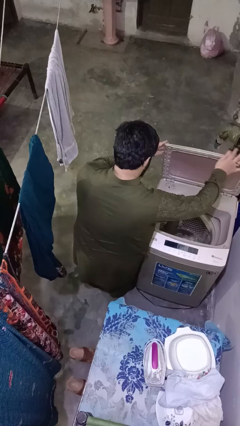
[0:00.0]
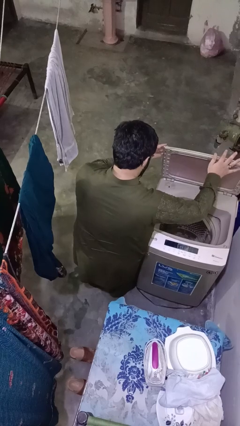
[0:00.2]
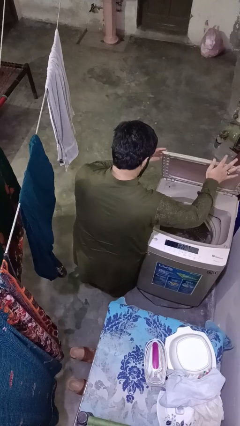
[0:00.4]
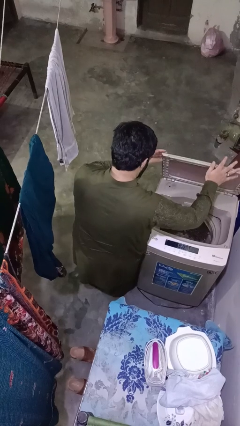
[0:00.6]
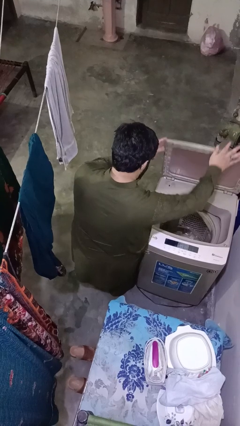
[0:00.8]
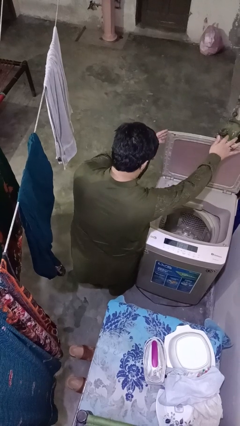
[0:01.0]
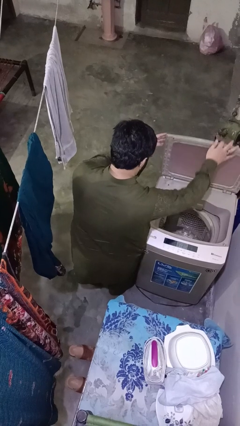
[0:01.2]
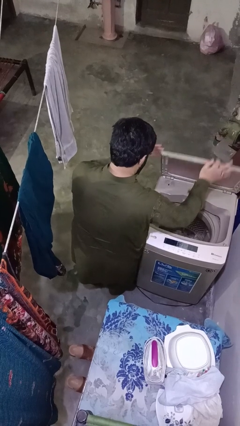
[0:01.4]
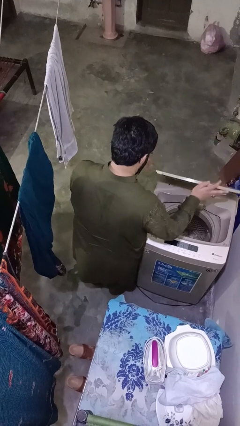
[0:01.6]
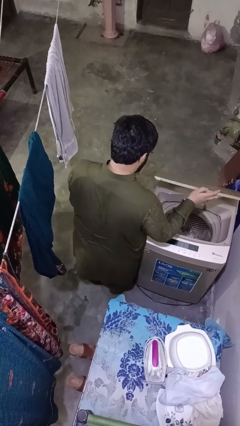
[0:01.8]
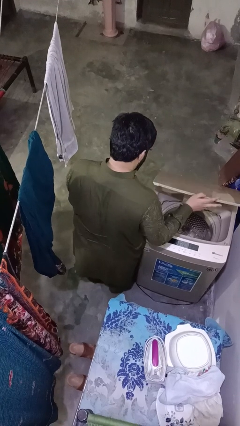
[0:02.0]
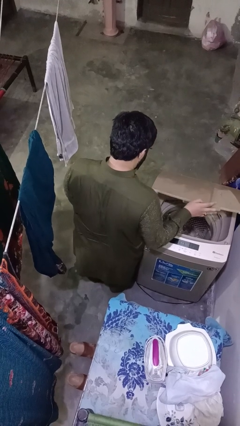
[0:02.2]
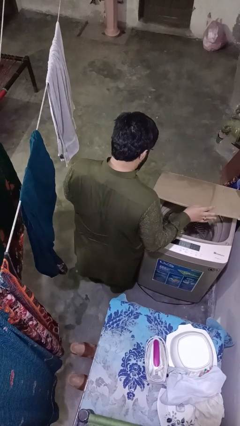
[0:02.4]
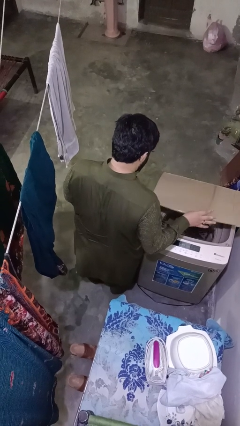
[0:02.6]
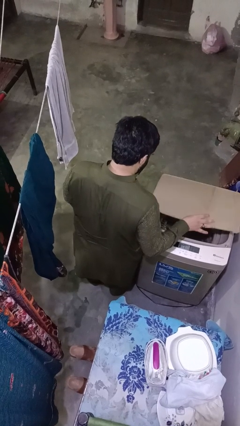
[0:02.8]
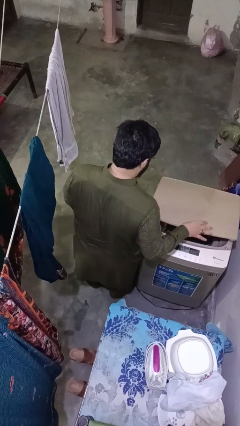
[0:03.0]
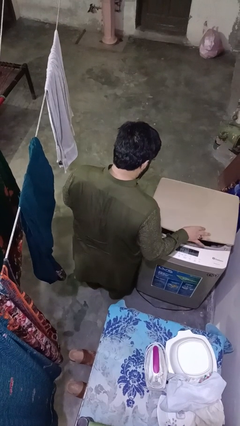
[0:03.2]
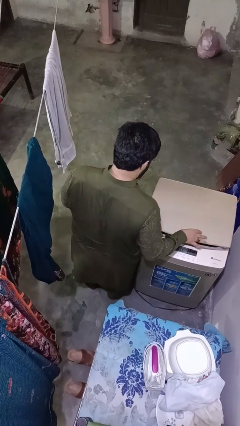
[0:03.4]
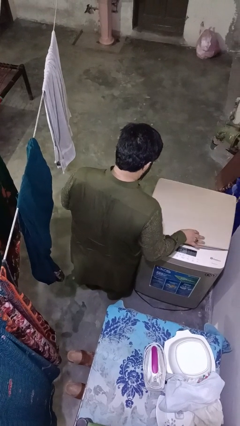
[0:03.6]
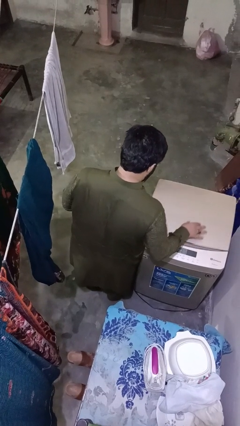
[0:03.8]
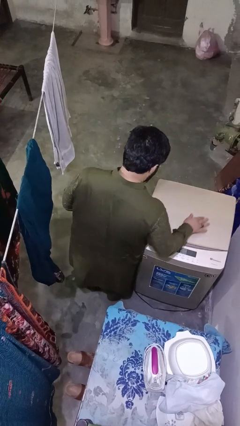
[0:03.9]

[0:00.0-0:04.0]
person closes clothes washer

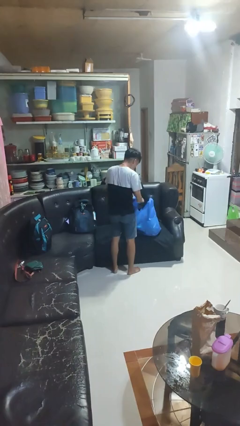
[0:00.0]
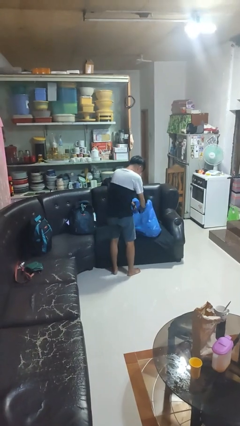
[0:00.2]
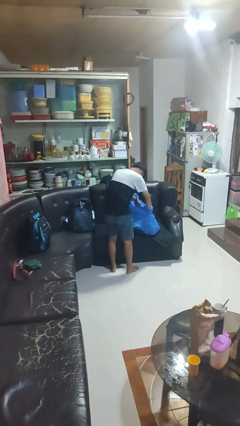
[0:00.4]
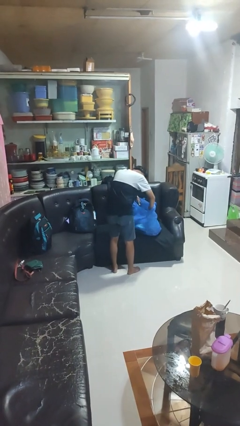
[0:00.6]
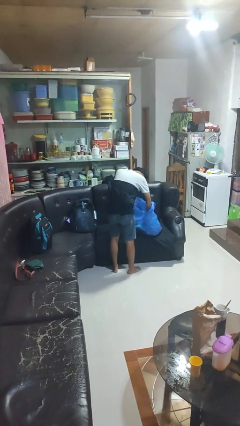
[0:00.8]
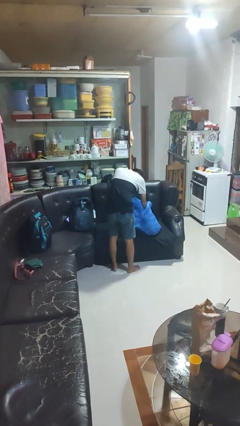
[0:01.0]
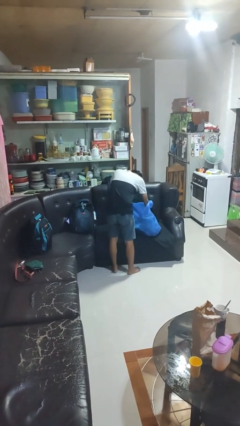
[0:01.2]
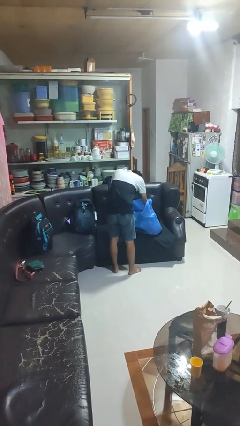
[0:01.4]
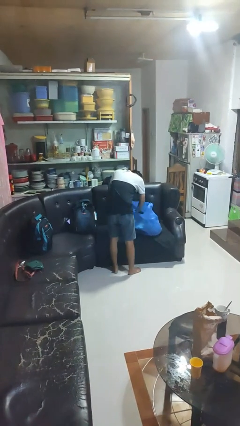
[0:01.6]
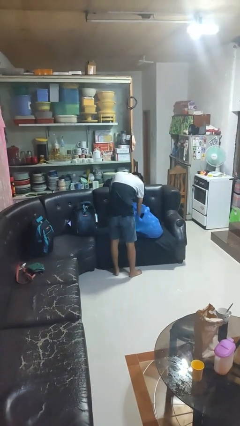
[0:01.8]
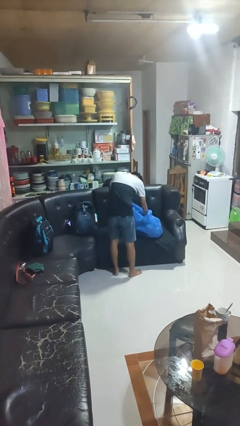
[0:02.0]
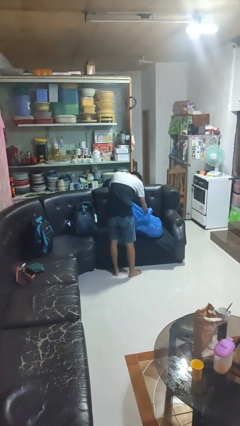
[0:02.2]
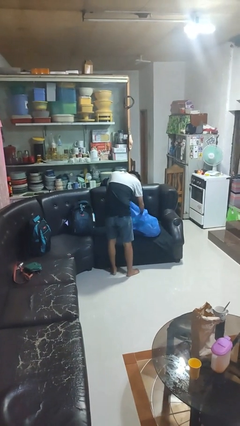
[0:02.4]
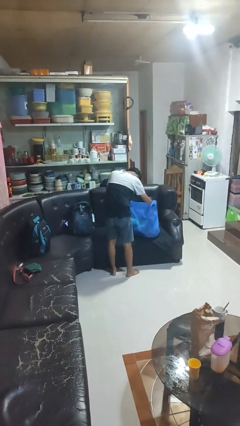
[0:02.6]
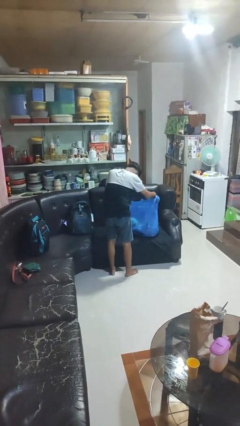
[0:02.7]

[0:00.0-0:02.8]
person searches in bag

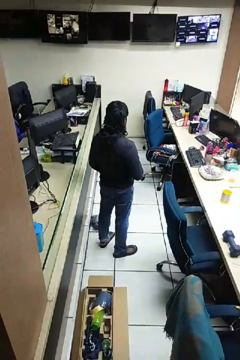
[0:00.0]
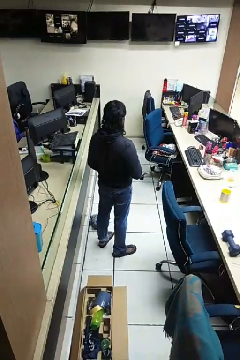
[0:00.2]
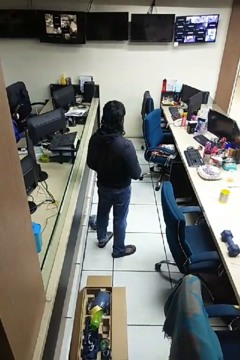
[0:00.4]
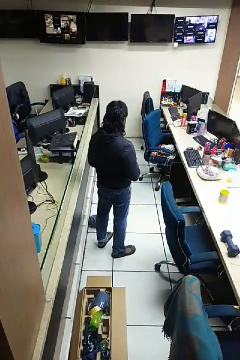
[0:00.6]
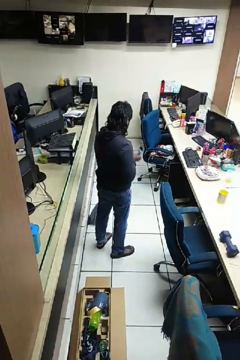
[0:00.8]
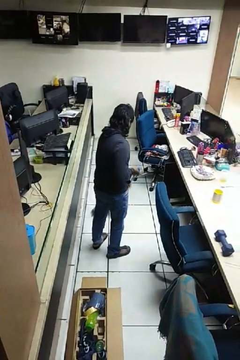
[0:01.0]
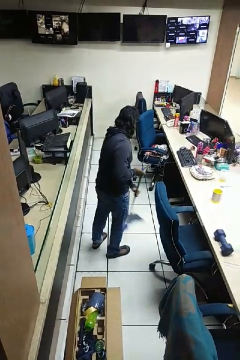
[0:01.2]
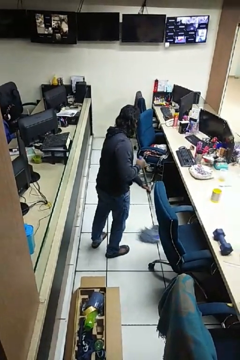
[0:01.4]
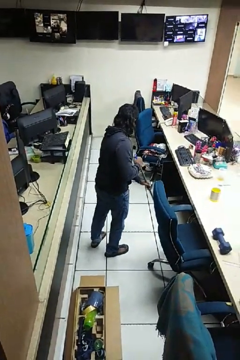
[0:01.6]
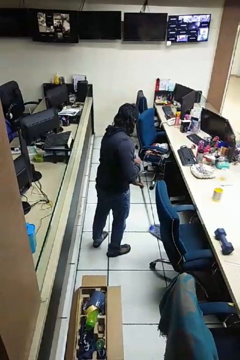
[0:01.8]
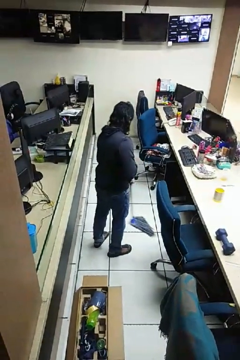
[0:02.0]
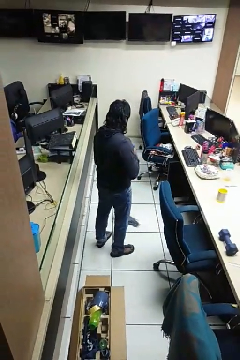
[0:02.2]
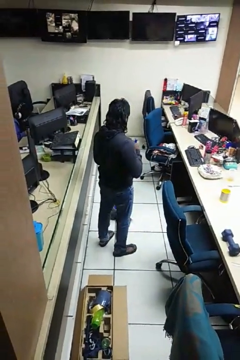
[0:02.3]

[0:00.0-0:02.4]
person mops

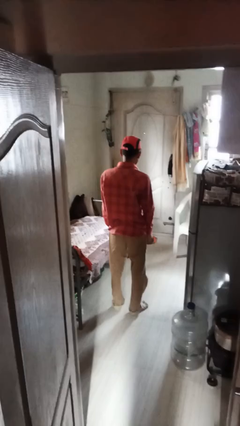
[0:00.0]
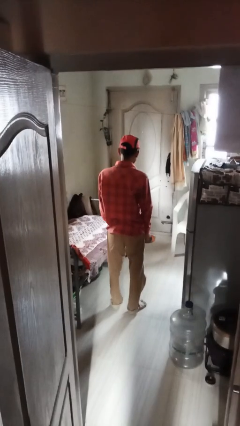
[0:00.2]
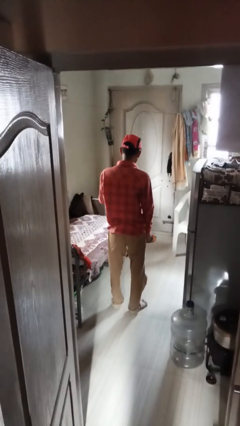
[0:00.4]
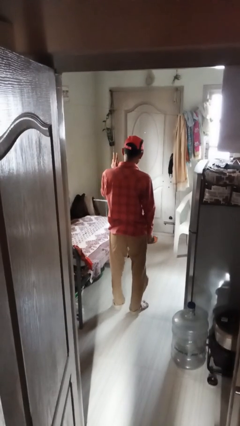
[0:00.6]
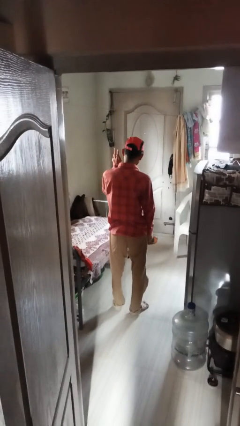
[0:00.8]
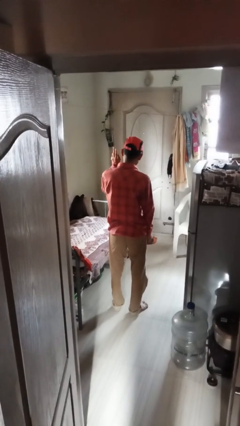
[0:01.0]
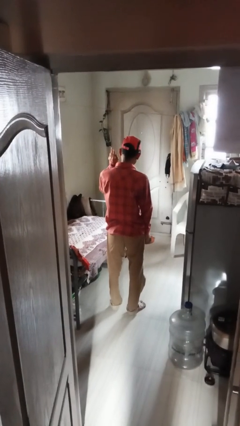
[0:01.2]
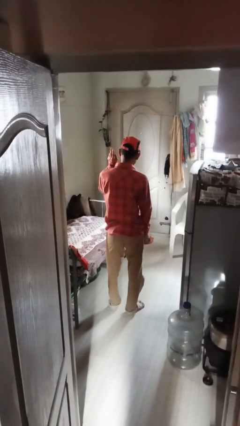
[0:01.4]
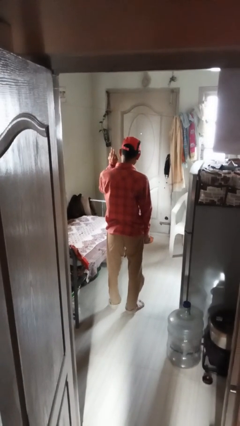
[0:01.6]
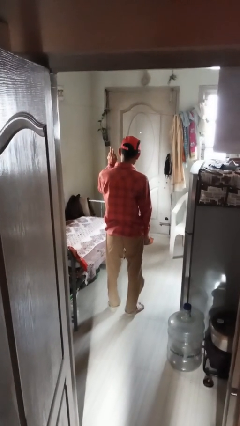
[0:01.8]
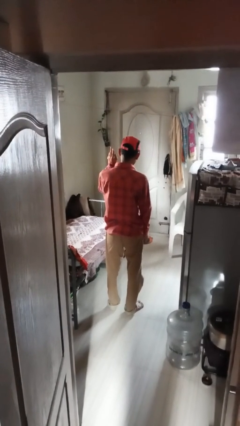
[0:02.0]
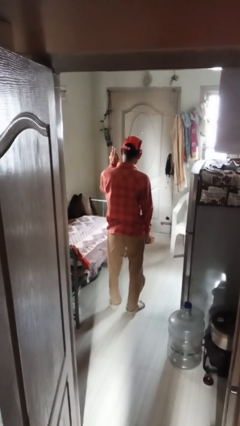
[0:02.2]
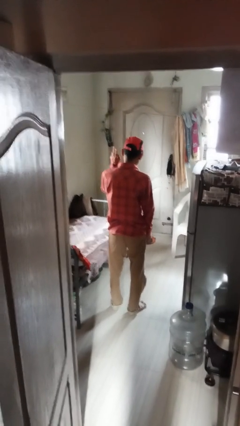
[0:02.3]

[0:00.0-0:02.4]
person gestures peace

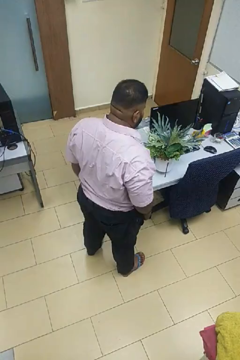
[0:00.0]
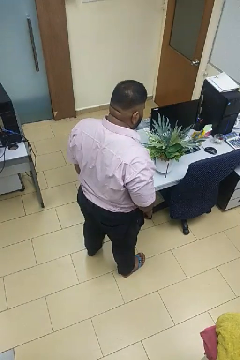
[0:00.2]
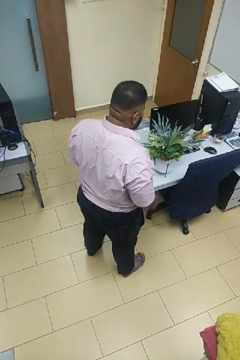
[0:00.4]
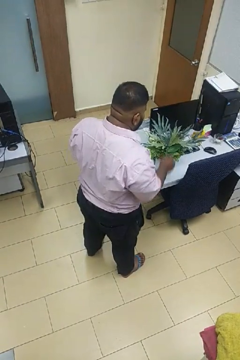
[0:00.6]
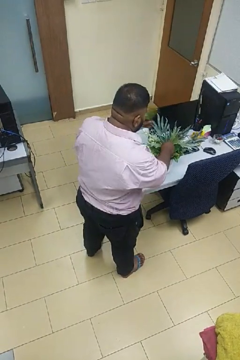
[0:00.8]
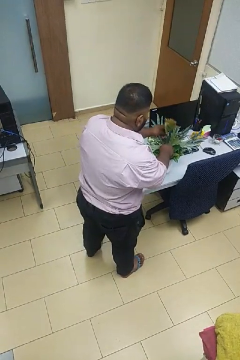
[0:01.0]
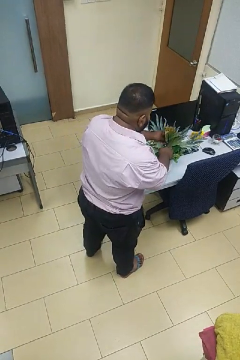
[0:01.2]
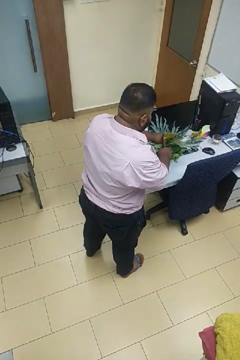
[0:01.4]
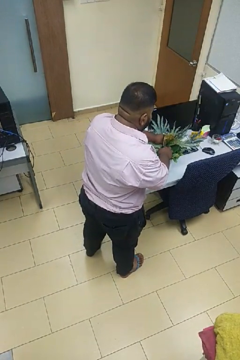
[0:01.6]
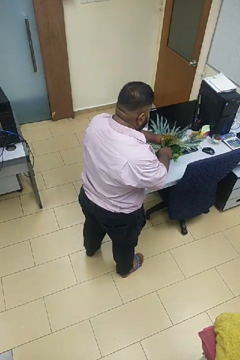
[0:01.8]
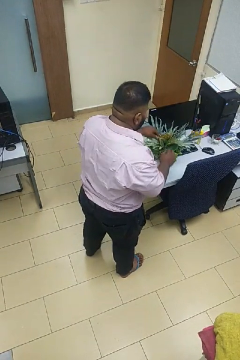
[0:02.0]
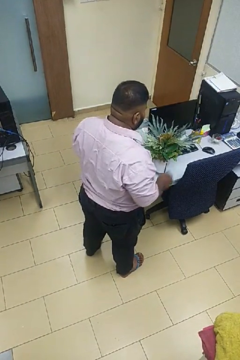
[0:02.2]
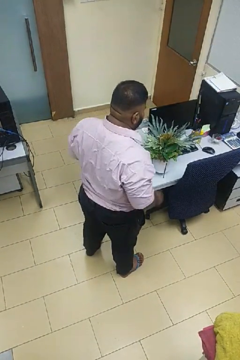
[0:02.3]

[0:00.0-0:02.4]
person arranges flowers in vase

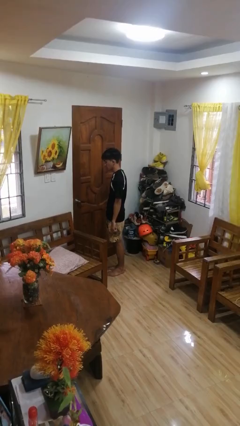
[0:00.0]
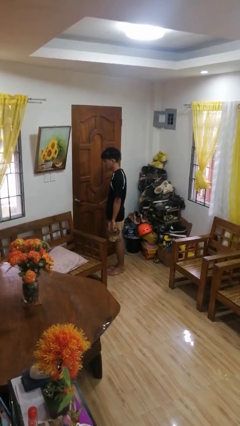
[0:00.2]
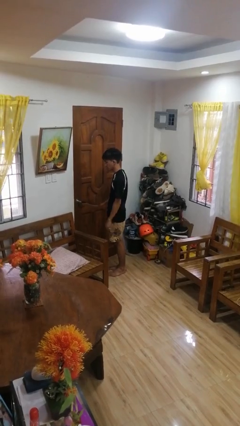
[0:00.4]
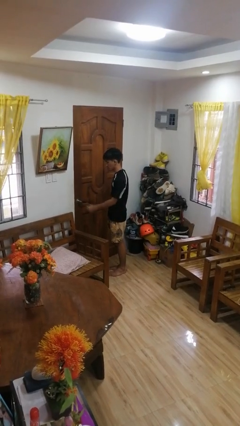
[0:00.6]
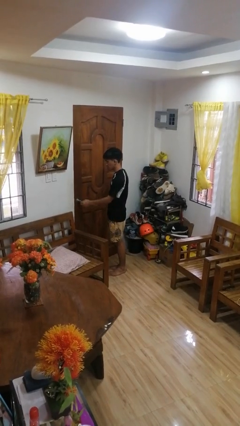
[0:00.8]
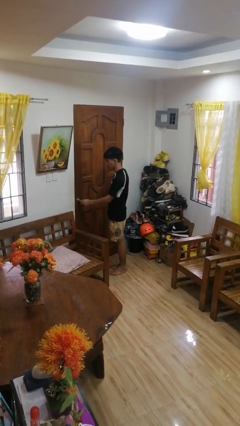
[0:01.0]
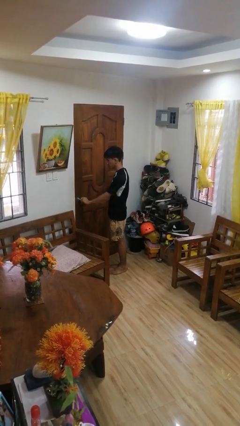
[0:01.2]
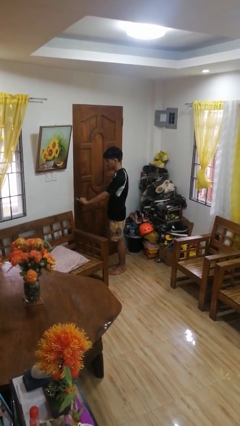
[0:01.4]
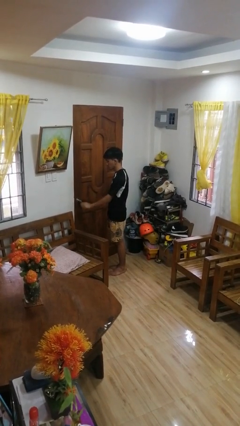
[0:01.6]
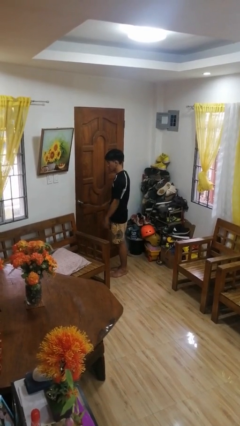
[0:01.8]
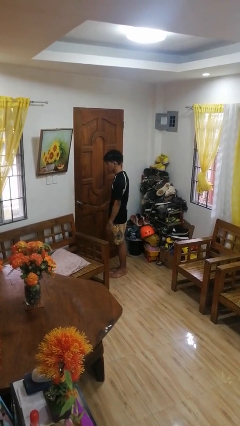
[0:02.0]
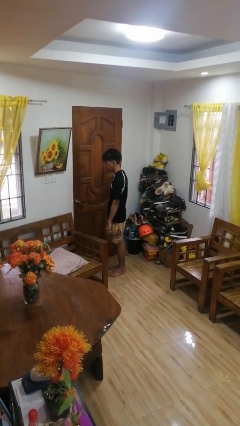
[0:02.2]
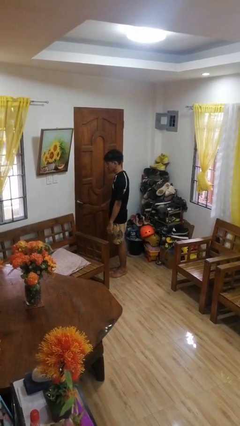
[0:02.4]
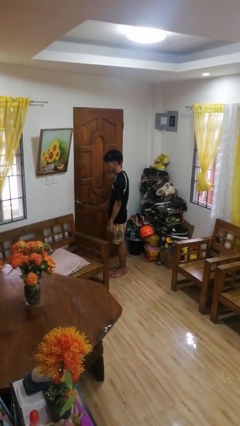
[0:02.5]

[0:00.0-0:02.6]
person unlocks door with keys

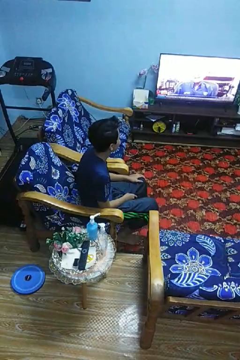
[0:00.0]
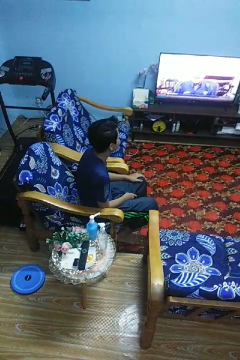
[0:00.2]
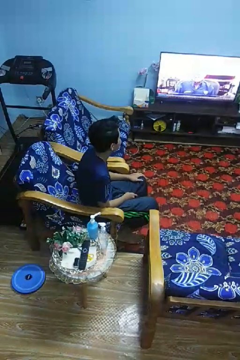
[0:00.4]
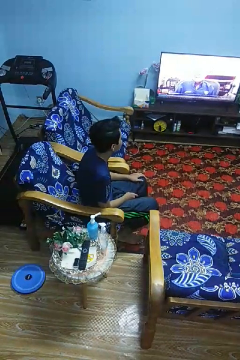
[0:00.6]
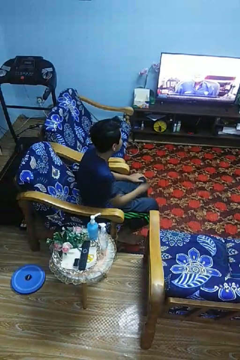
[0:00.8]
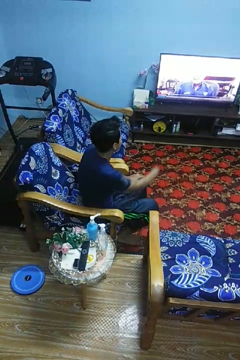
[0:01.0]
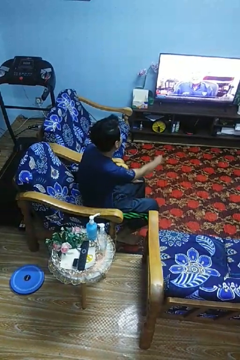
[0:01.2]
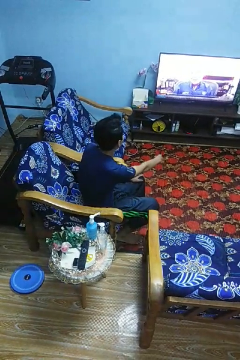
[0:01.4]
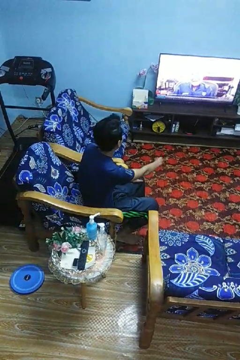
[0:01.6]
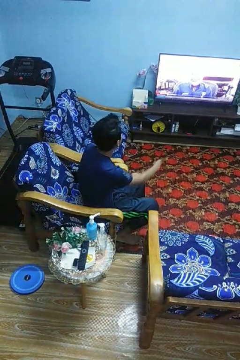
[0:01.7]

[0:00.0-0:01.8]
person uses television remote
